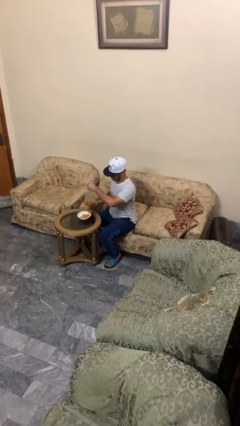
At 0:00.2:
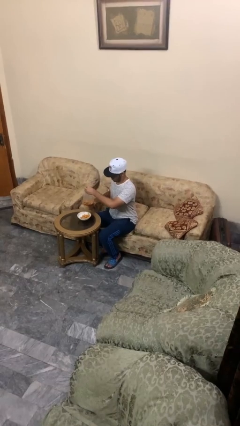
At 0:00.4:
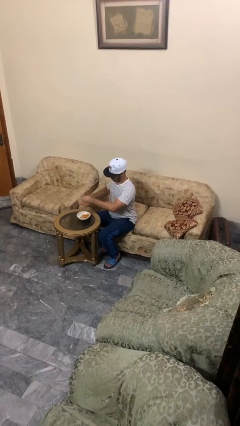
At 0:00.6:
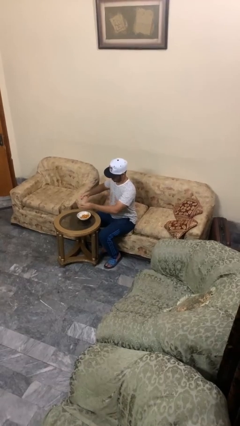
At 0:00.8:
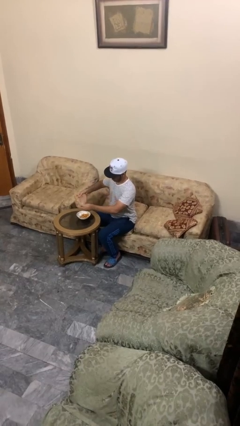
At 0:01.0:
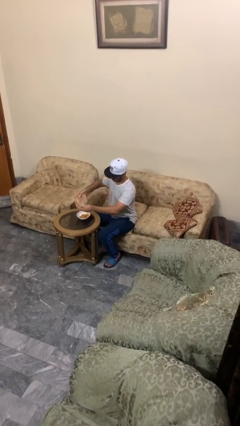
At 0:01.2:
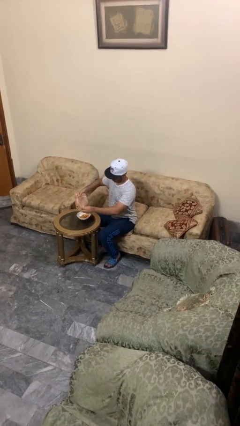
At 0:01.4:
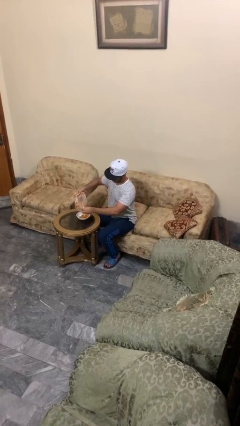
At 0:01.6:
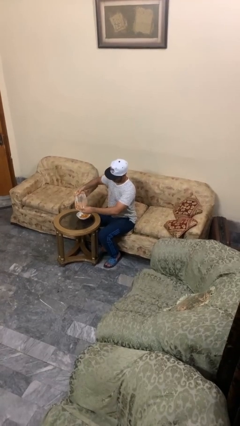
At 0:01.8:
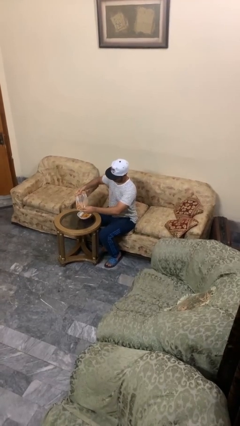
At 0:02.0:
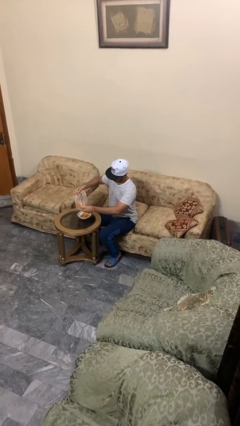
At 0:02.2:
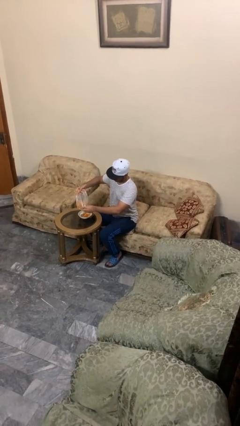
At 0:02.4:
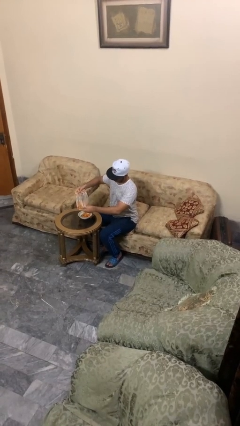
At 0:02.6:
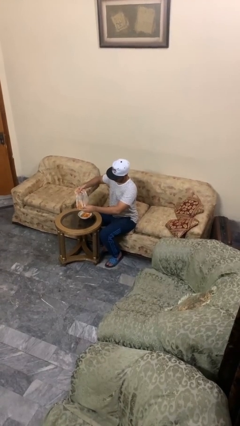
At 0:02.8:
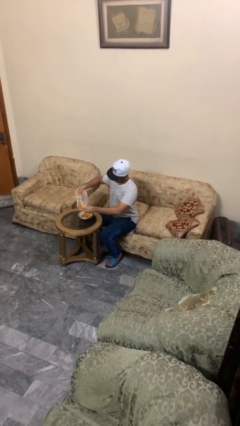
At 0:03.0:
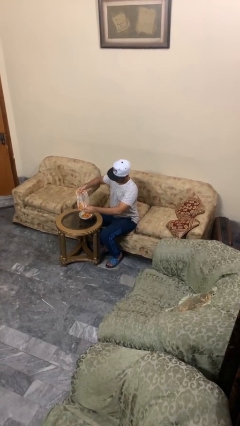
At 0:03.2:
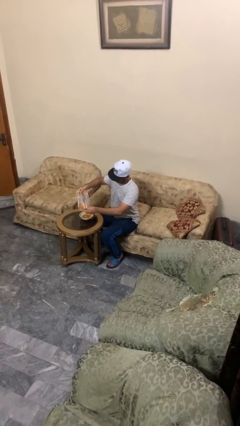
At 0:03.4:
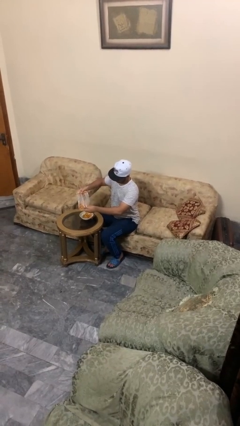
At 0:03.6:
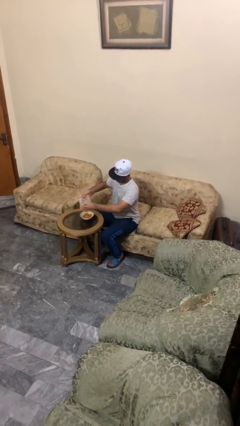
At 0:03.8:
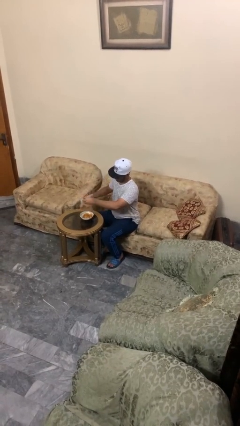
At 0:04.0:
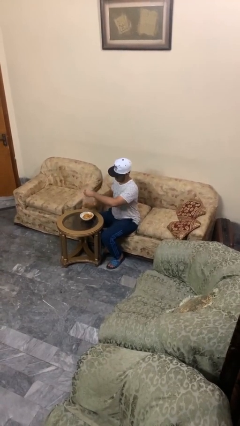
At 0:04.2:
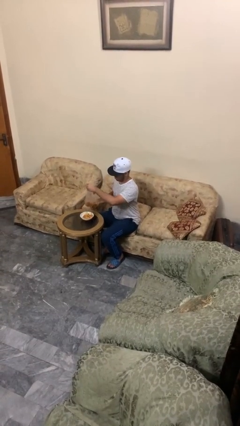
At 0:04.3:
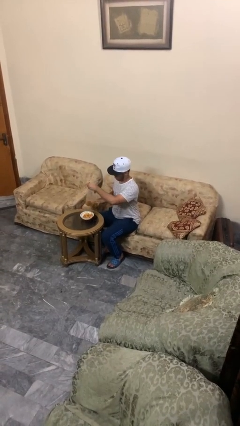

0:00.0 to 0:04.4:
person pours into bowl

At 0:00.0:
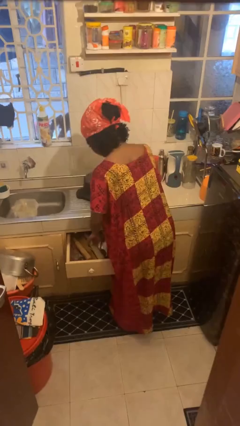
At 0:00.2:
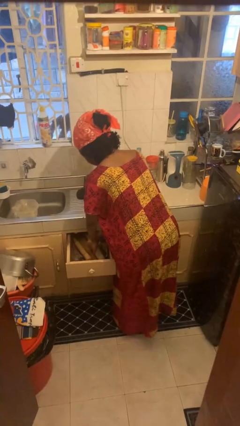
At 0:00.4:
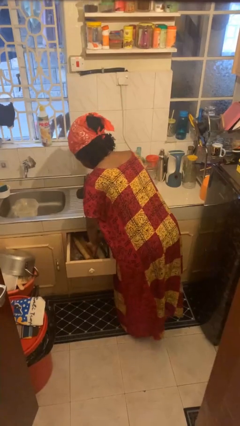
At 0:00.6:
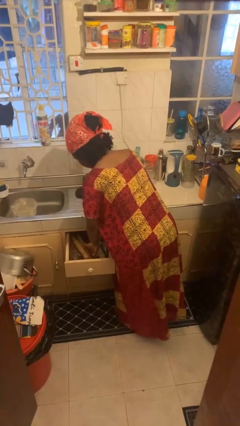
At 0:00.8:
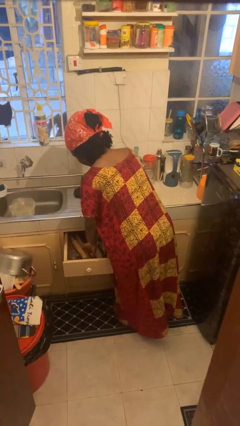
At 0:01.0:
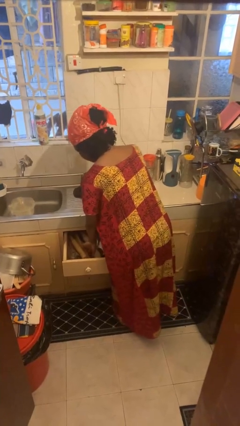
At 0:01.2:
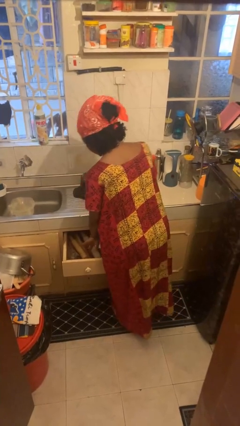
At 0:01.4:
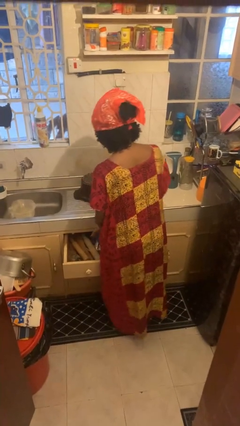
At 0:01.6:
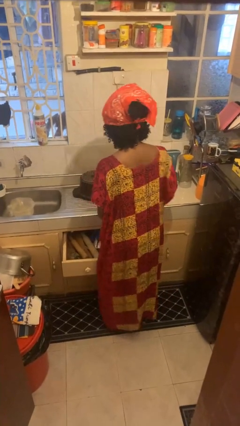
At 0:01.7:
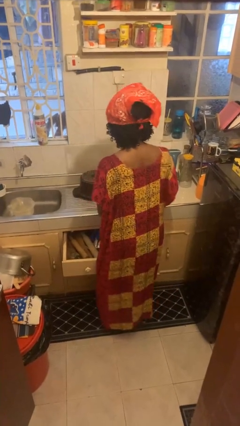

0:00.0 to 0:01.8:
person searches in kitchen drawer

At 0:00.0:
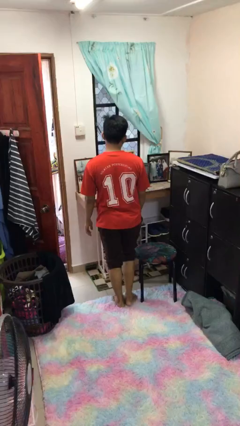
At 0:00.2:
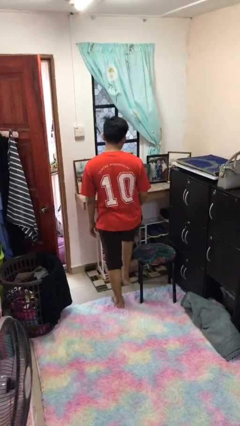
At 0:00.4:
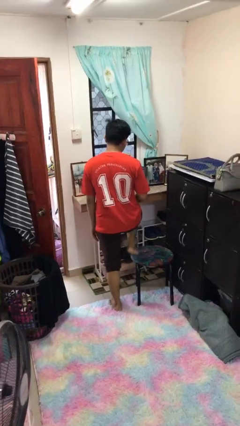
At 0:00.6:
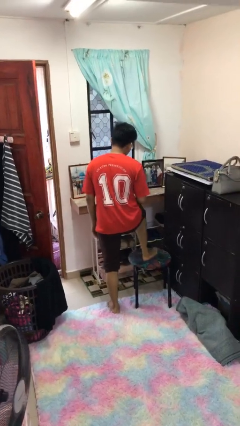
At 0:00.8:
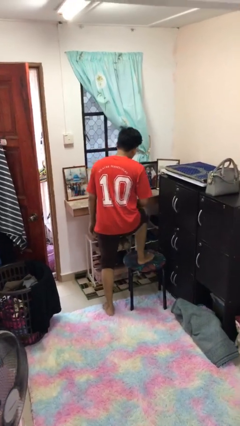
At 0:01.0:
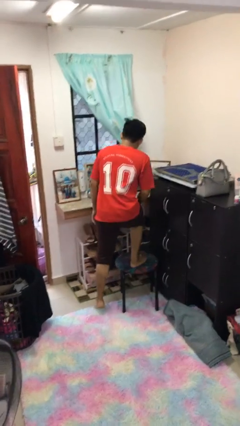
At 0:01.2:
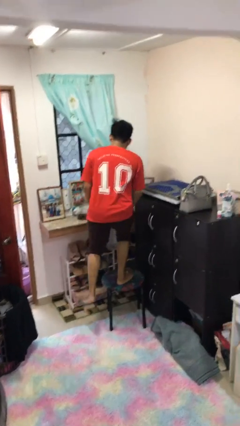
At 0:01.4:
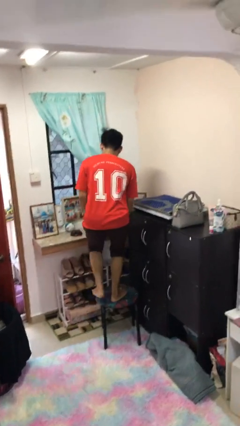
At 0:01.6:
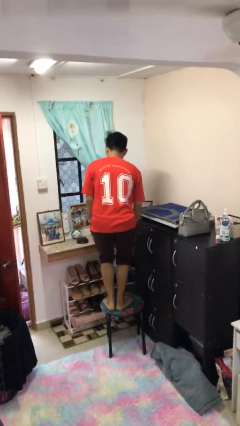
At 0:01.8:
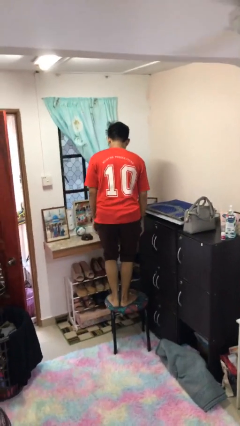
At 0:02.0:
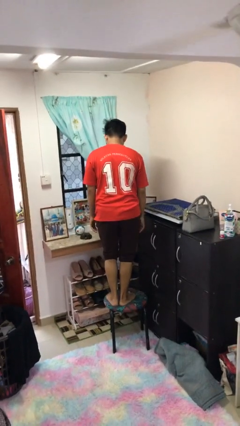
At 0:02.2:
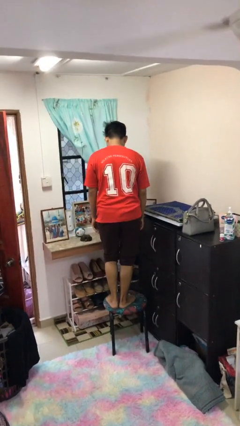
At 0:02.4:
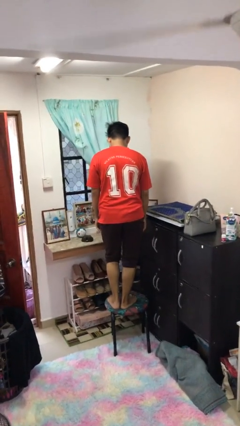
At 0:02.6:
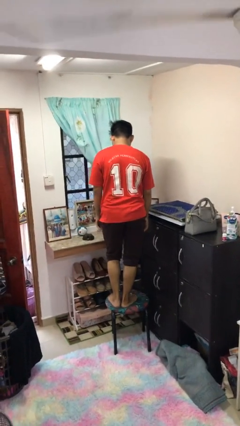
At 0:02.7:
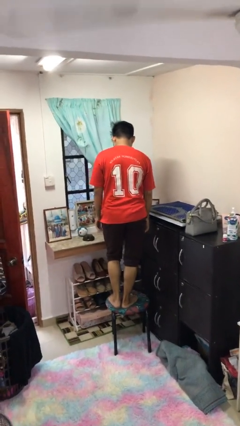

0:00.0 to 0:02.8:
person climbs on chair

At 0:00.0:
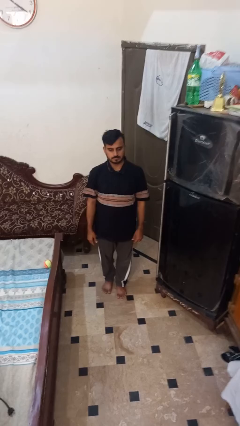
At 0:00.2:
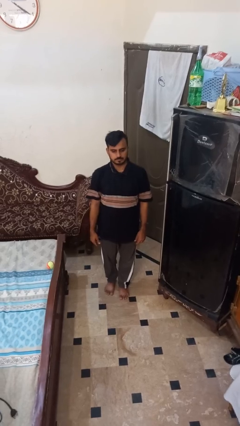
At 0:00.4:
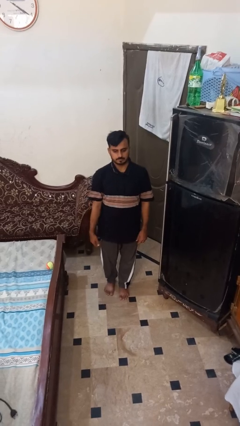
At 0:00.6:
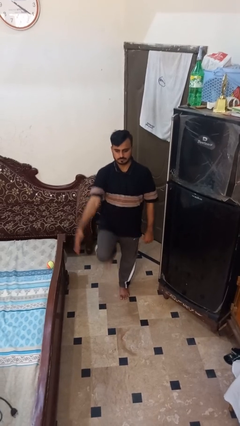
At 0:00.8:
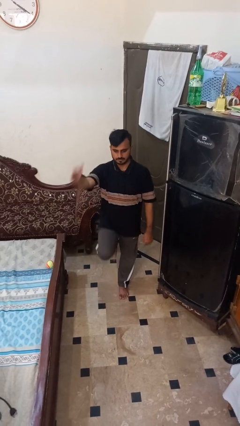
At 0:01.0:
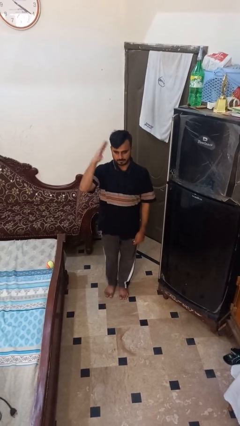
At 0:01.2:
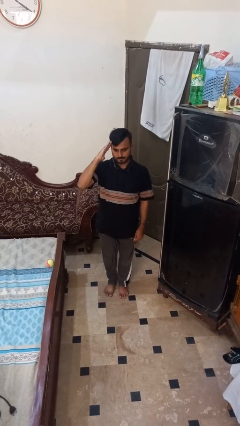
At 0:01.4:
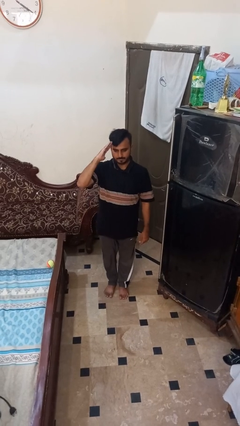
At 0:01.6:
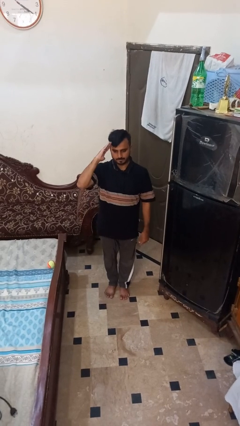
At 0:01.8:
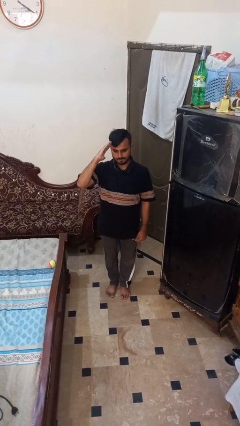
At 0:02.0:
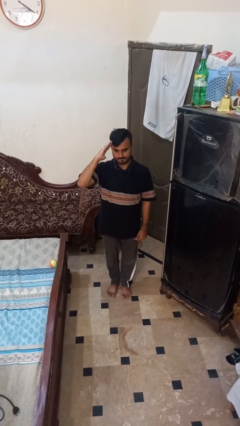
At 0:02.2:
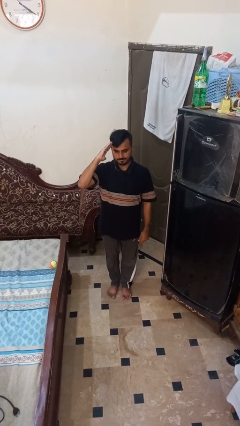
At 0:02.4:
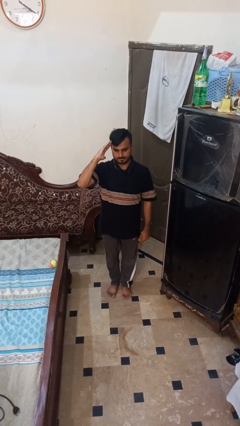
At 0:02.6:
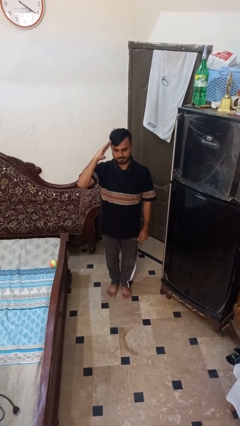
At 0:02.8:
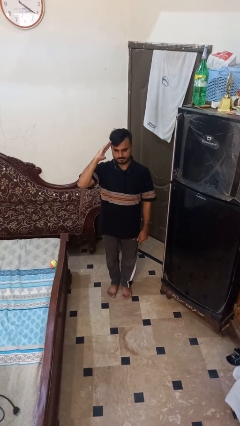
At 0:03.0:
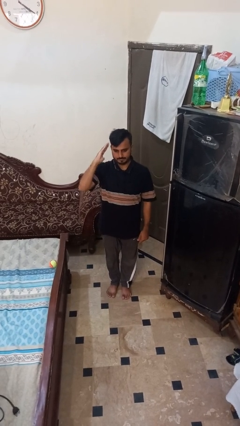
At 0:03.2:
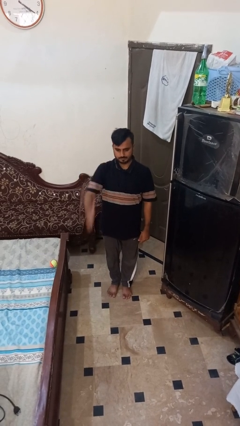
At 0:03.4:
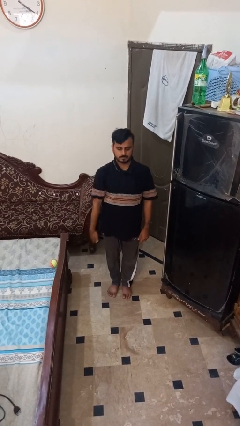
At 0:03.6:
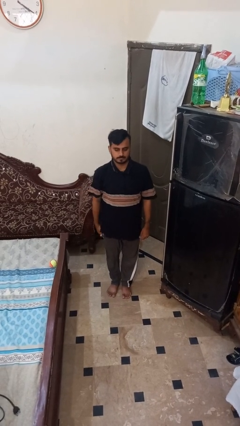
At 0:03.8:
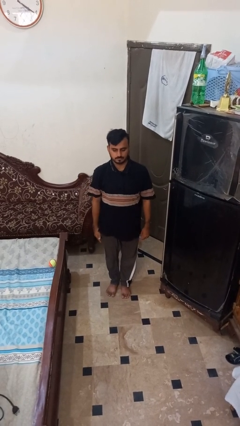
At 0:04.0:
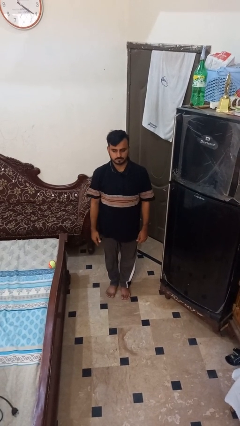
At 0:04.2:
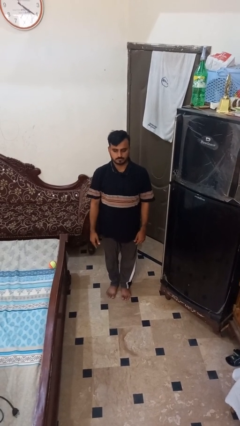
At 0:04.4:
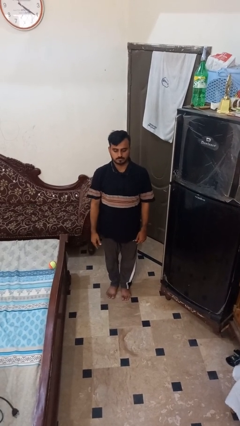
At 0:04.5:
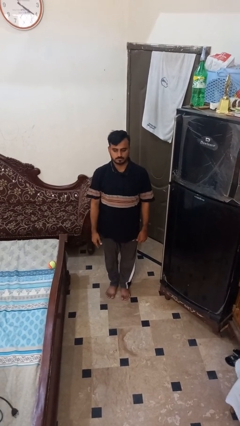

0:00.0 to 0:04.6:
person salutes

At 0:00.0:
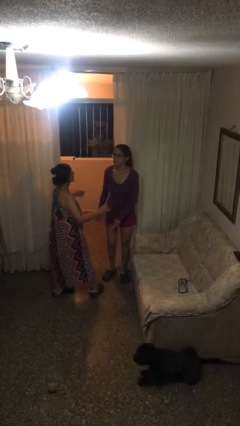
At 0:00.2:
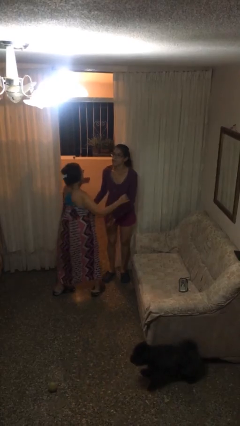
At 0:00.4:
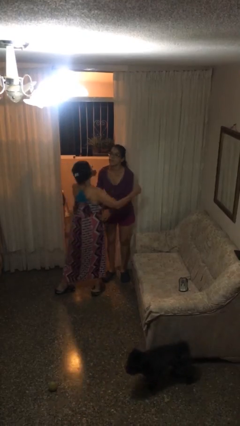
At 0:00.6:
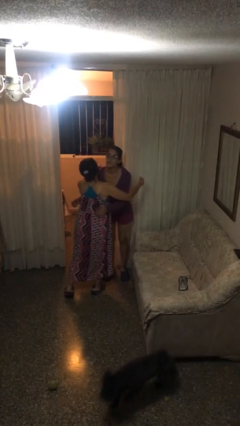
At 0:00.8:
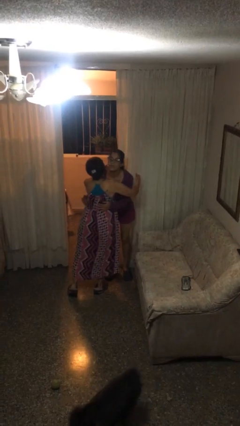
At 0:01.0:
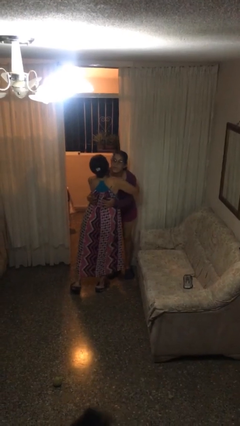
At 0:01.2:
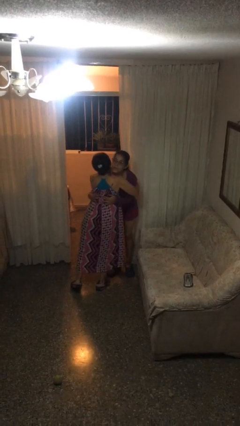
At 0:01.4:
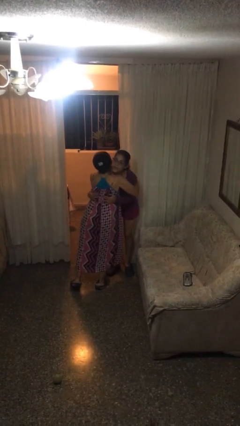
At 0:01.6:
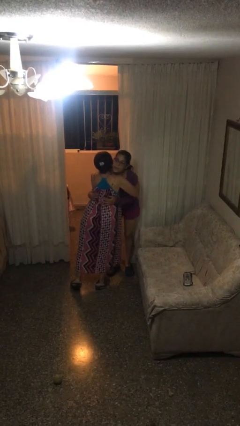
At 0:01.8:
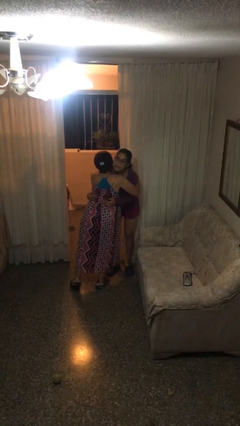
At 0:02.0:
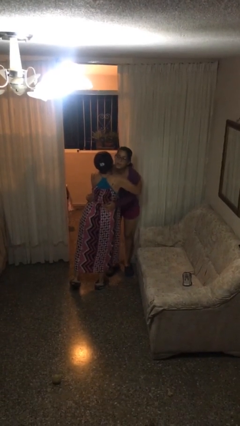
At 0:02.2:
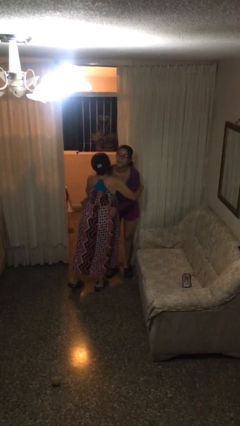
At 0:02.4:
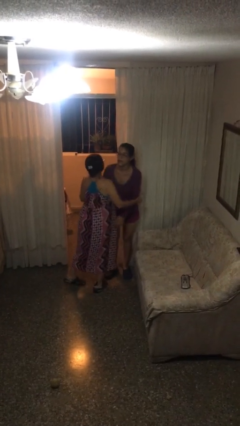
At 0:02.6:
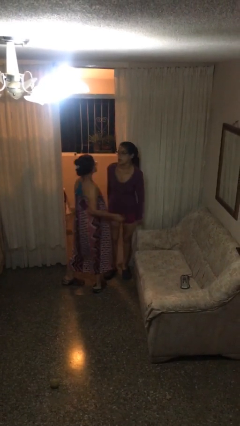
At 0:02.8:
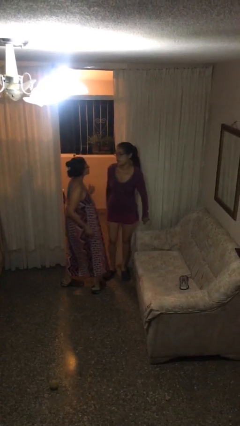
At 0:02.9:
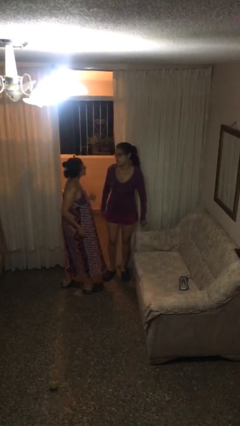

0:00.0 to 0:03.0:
person embraces person

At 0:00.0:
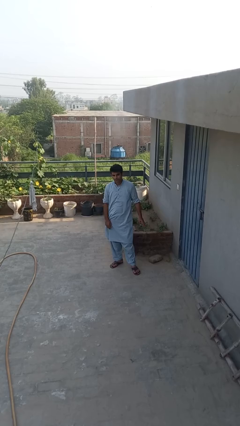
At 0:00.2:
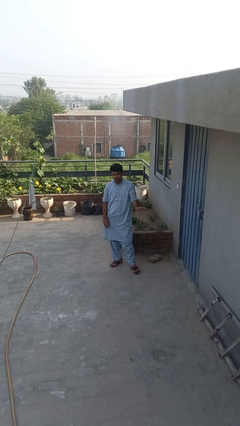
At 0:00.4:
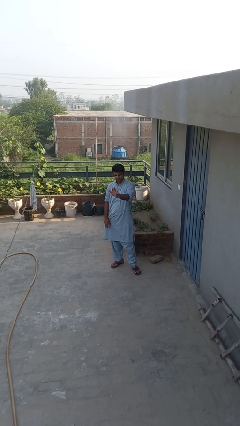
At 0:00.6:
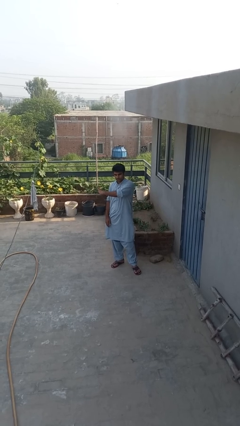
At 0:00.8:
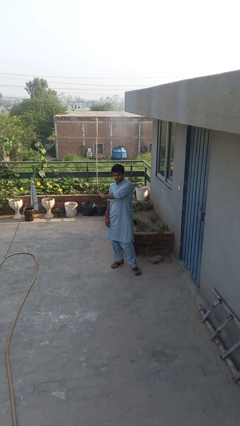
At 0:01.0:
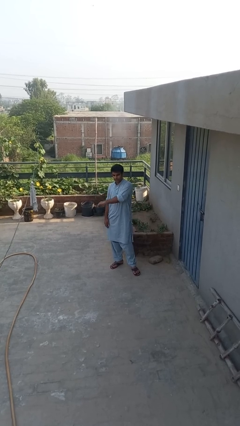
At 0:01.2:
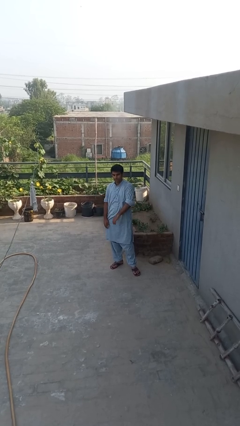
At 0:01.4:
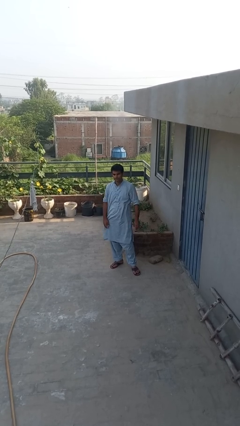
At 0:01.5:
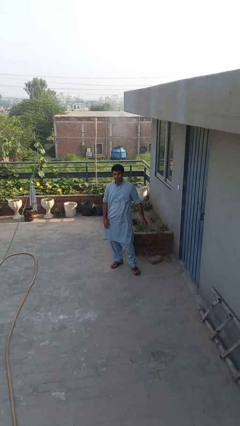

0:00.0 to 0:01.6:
person gestures swipe right
